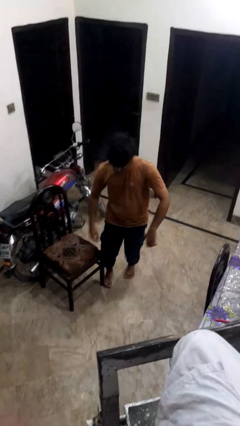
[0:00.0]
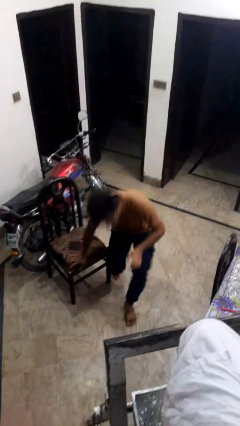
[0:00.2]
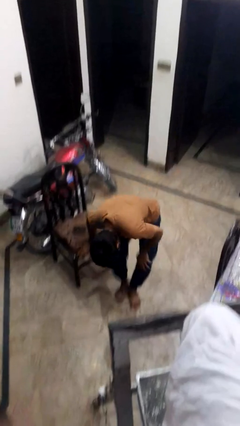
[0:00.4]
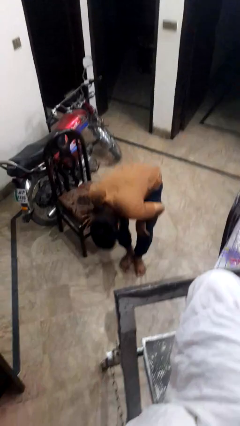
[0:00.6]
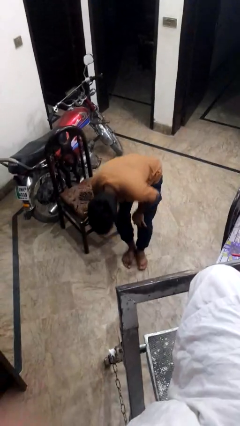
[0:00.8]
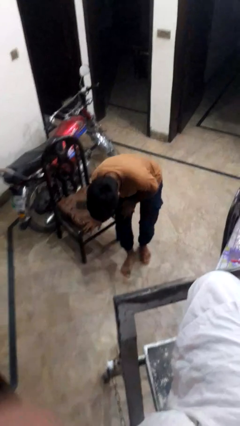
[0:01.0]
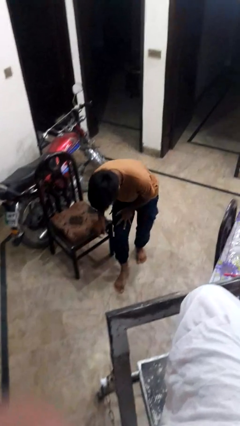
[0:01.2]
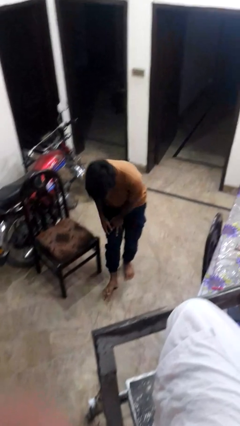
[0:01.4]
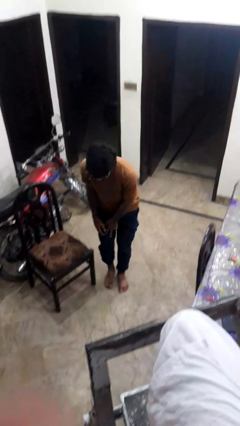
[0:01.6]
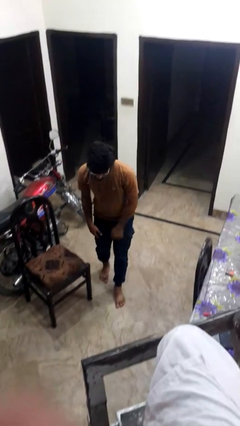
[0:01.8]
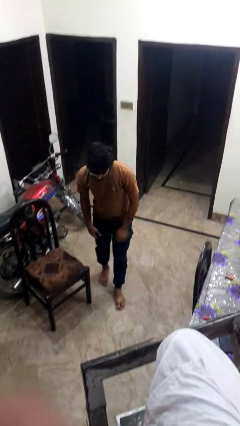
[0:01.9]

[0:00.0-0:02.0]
person stubs toe

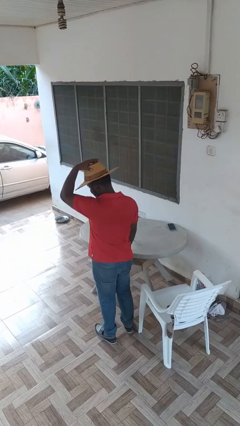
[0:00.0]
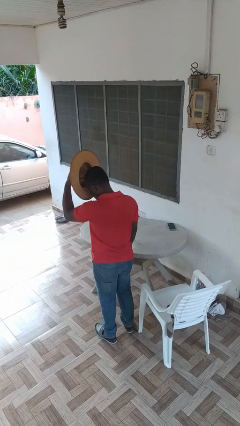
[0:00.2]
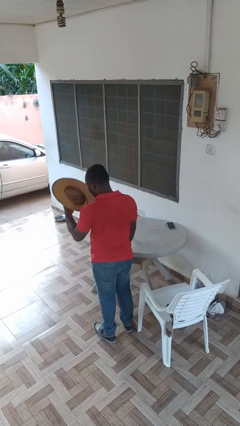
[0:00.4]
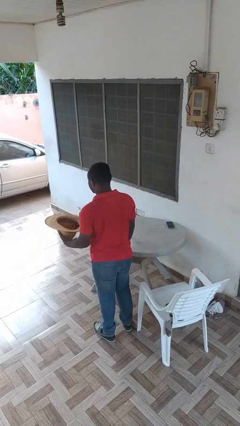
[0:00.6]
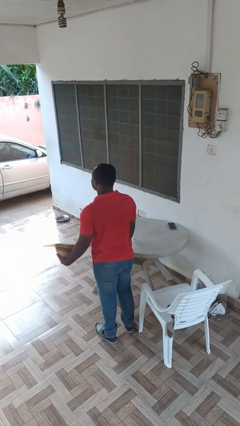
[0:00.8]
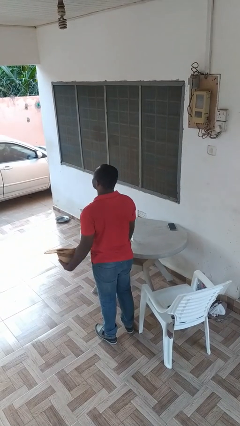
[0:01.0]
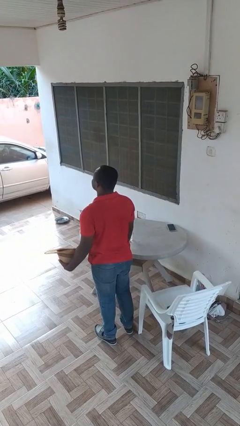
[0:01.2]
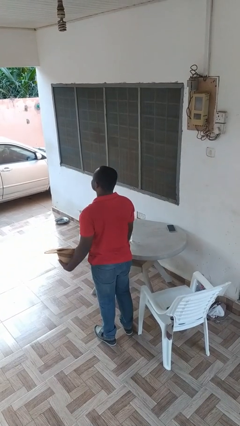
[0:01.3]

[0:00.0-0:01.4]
person takes off hat

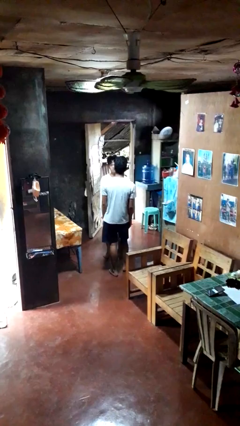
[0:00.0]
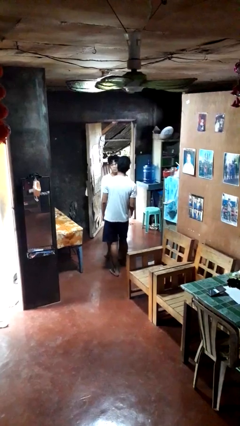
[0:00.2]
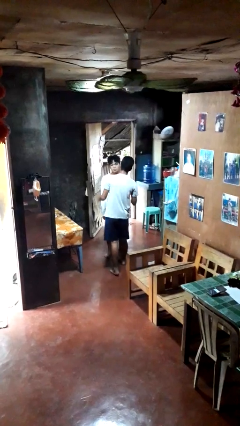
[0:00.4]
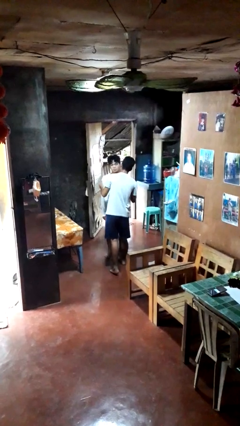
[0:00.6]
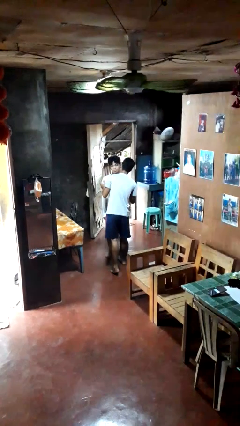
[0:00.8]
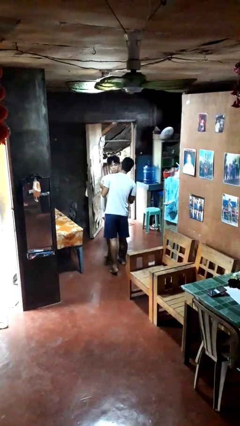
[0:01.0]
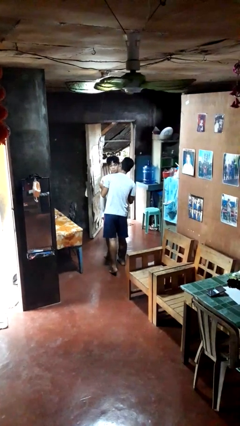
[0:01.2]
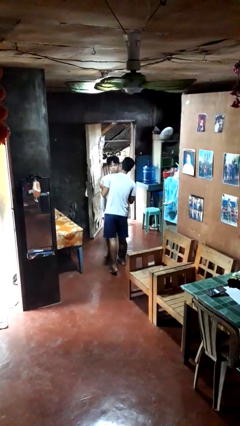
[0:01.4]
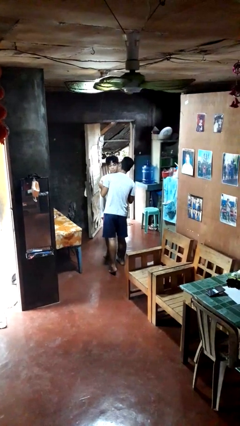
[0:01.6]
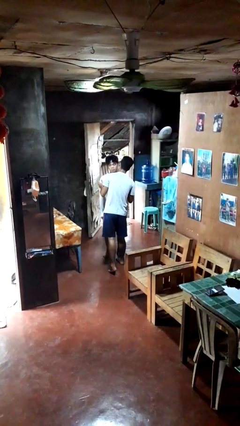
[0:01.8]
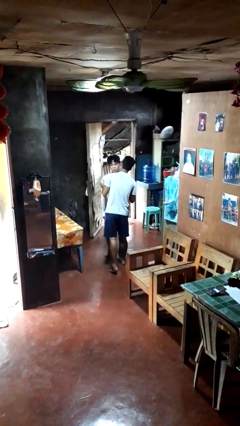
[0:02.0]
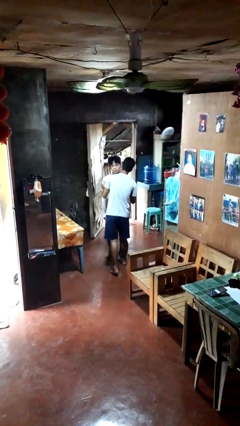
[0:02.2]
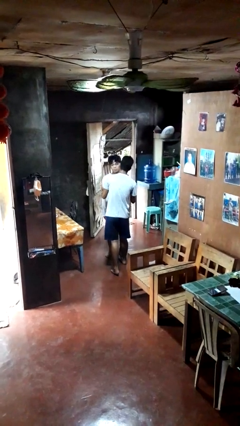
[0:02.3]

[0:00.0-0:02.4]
person kisses cheek of person

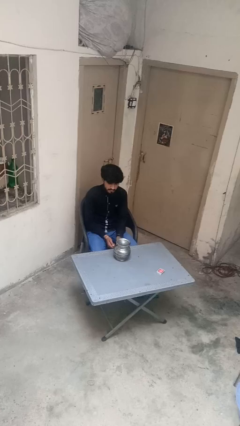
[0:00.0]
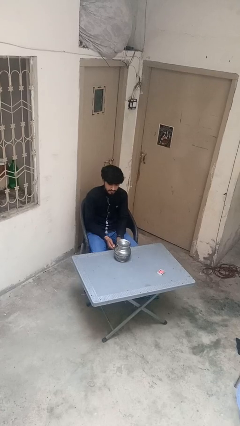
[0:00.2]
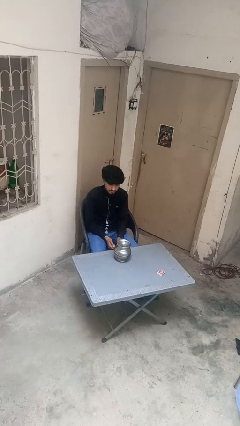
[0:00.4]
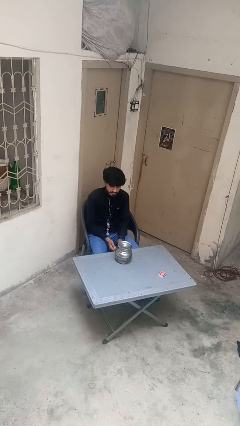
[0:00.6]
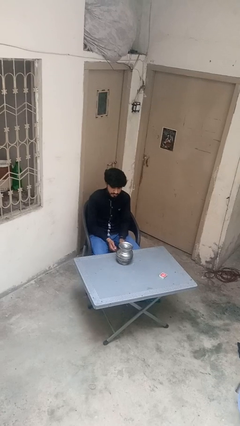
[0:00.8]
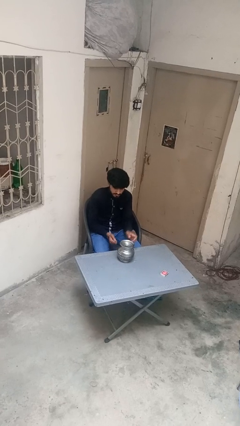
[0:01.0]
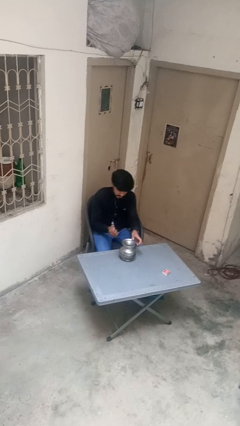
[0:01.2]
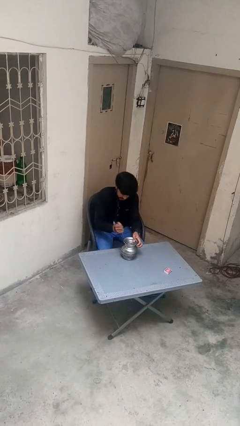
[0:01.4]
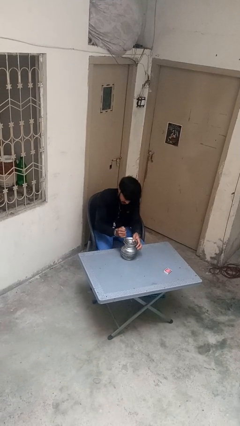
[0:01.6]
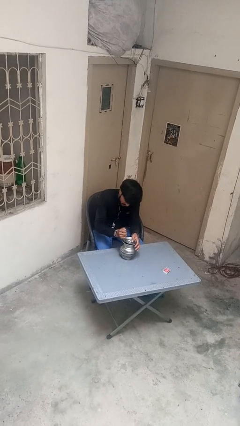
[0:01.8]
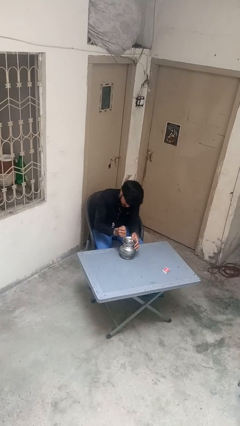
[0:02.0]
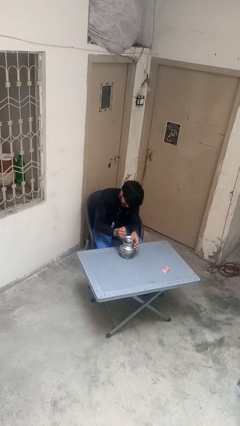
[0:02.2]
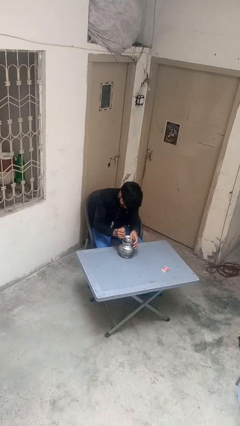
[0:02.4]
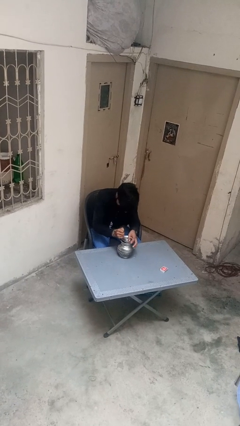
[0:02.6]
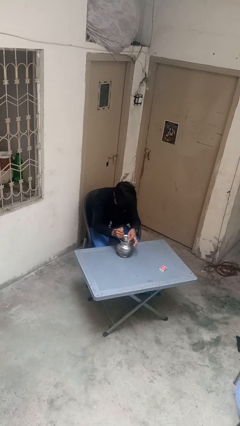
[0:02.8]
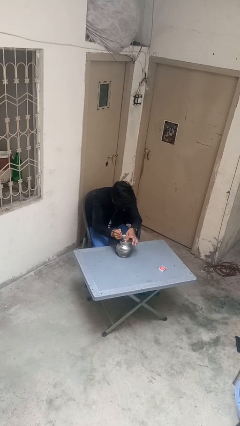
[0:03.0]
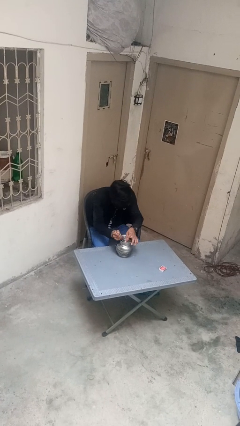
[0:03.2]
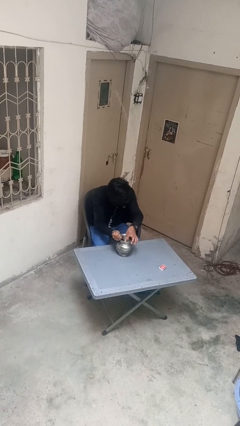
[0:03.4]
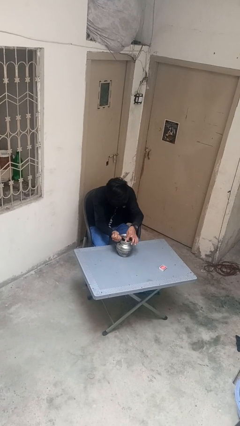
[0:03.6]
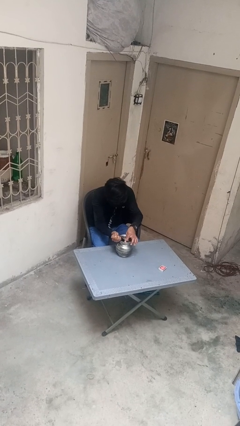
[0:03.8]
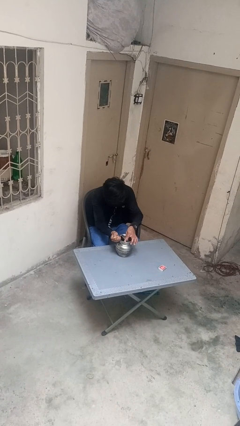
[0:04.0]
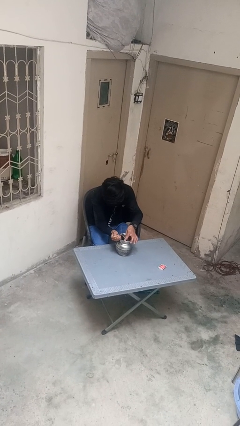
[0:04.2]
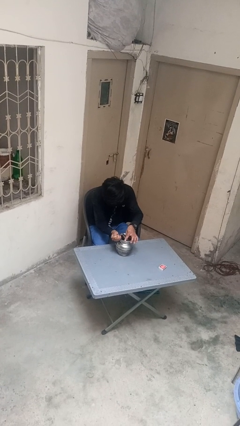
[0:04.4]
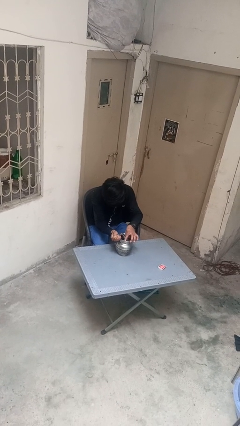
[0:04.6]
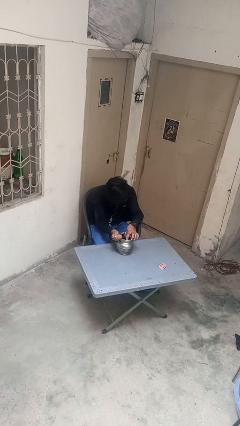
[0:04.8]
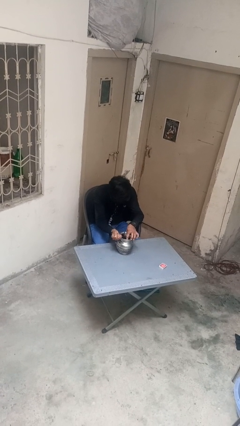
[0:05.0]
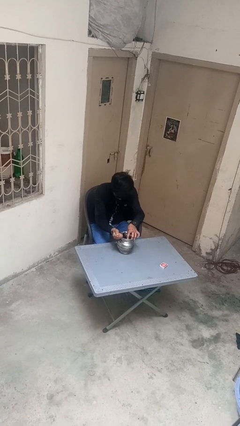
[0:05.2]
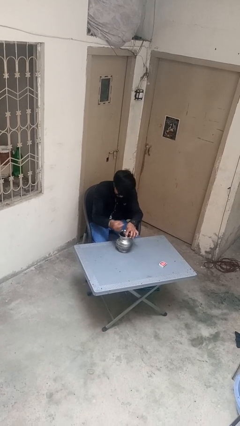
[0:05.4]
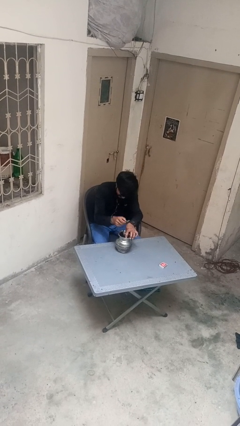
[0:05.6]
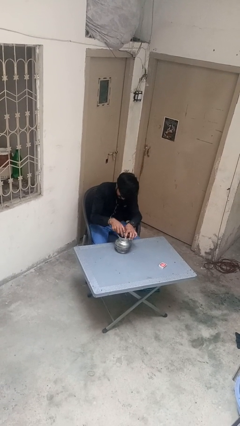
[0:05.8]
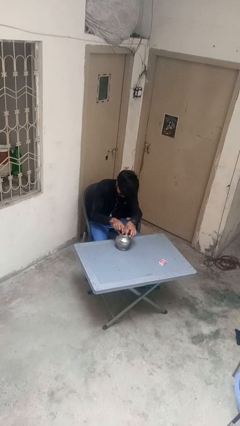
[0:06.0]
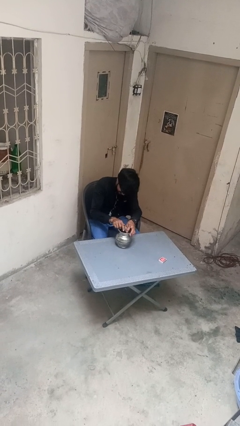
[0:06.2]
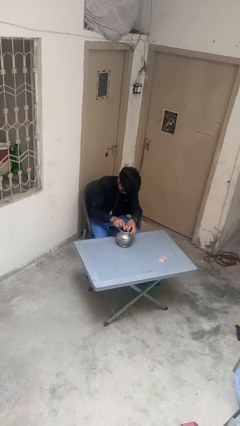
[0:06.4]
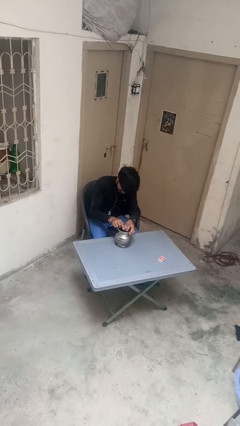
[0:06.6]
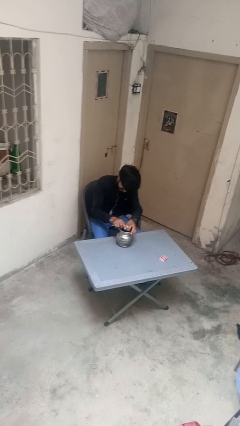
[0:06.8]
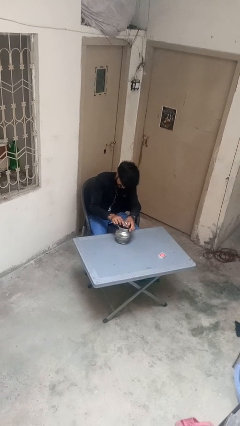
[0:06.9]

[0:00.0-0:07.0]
person opens can with can opener

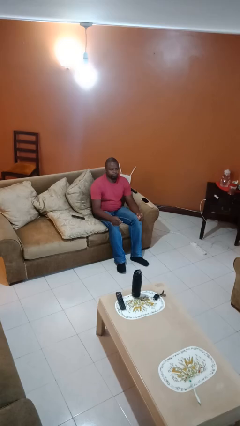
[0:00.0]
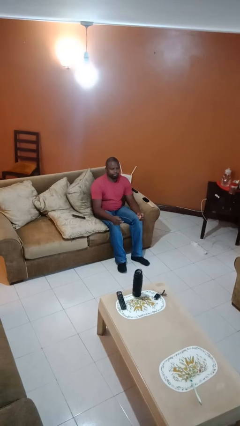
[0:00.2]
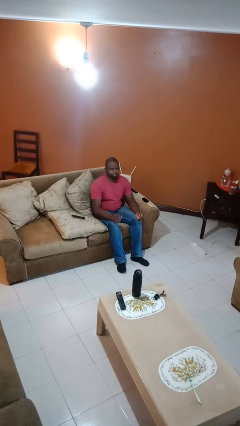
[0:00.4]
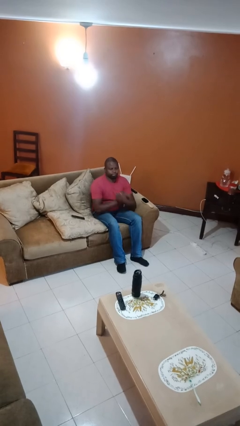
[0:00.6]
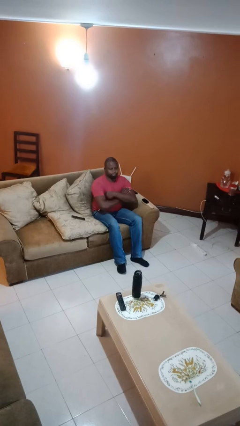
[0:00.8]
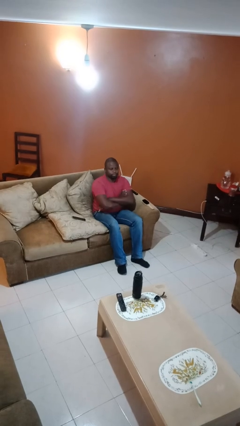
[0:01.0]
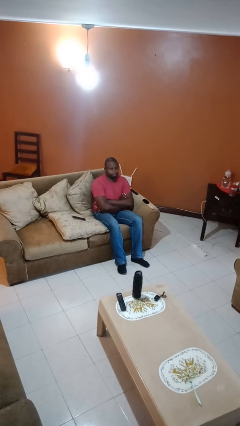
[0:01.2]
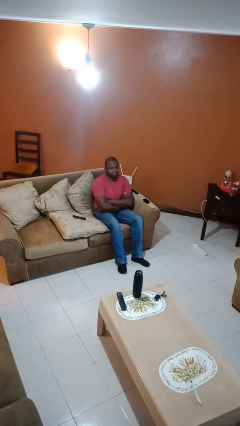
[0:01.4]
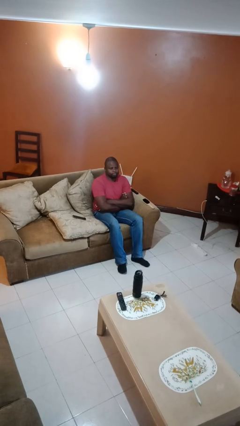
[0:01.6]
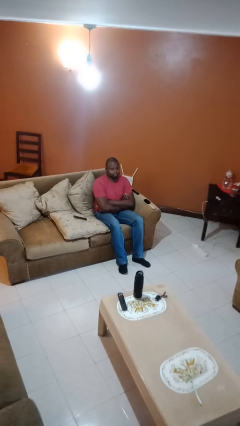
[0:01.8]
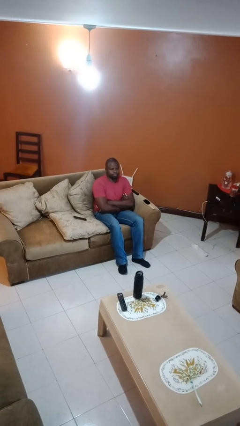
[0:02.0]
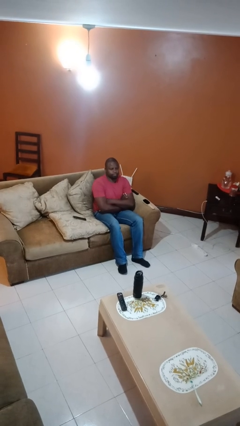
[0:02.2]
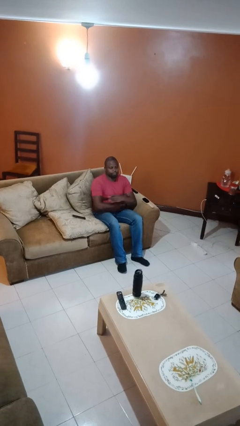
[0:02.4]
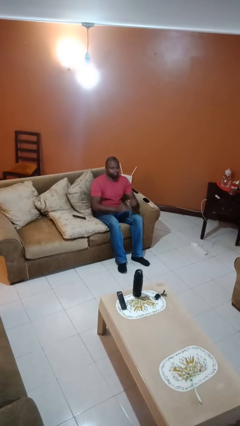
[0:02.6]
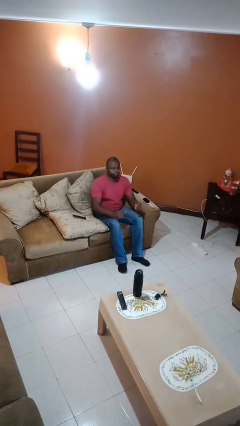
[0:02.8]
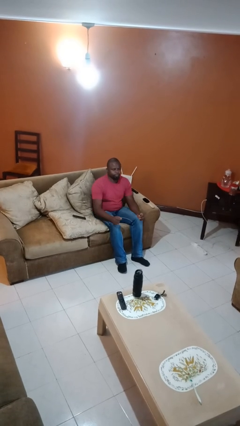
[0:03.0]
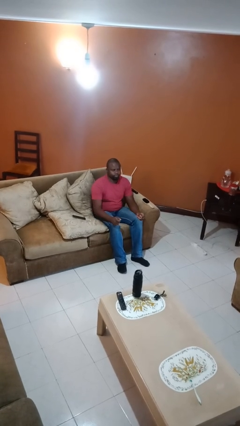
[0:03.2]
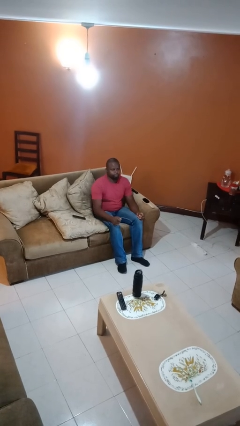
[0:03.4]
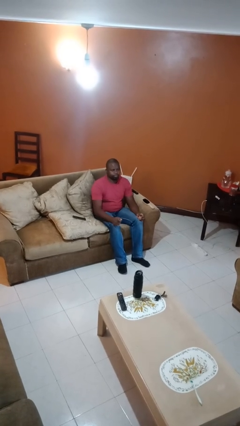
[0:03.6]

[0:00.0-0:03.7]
person crosses arms

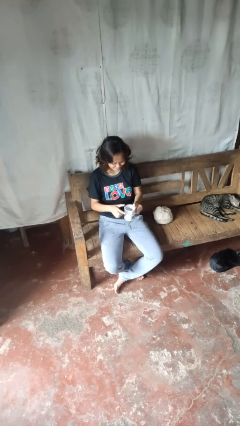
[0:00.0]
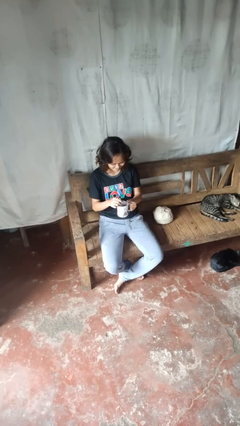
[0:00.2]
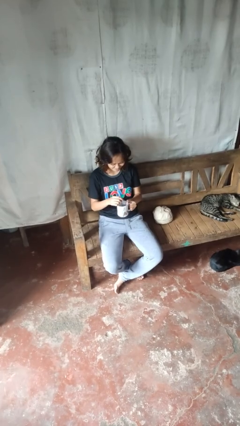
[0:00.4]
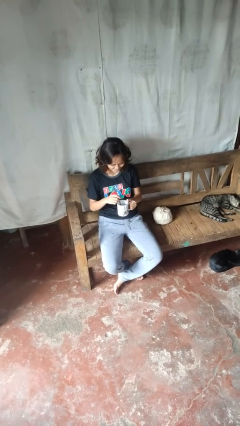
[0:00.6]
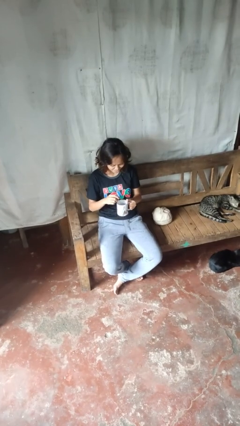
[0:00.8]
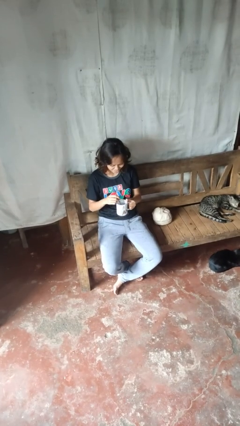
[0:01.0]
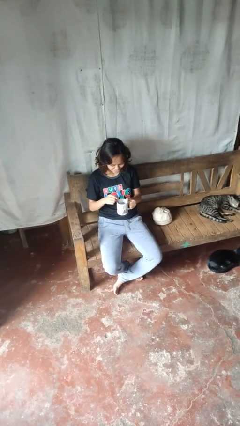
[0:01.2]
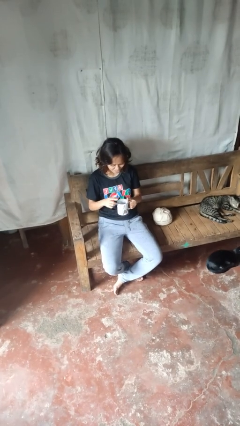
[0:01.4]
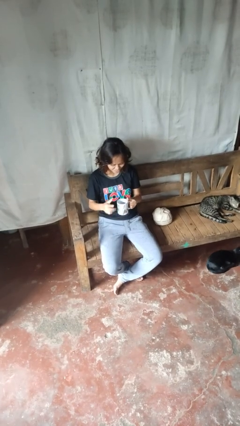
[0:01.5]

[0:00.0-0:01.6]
person stirs mug
